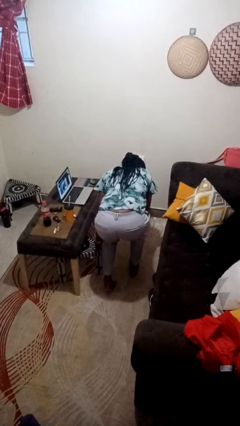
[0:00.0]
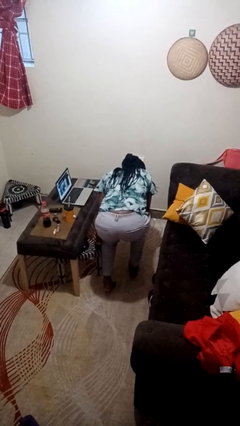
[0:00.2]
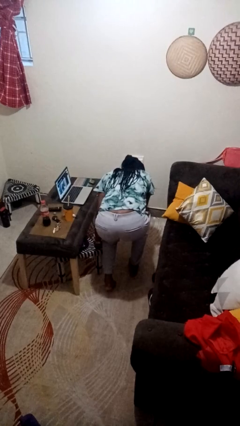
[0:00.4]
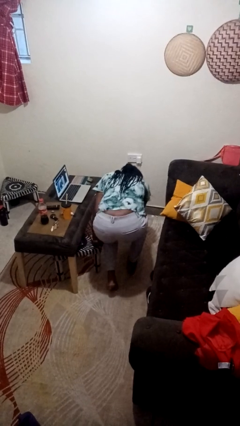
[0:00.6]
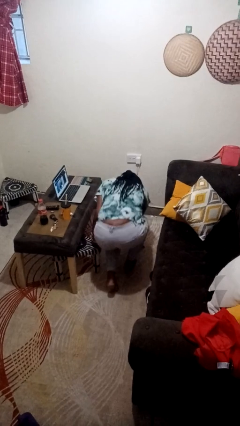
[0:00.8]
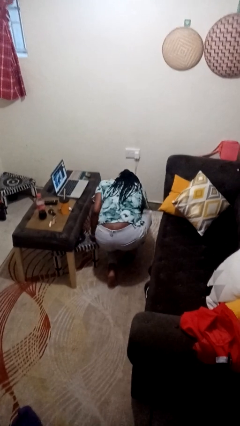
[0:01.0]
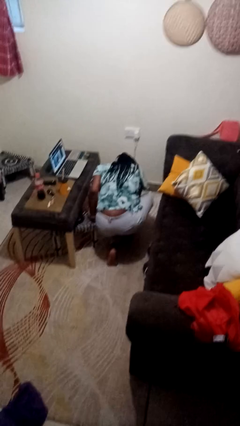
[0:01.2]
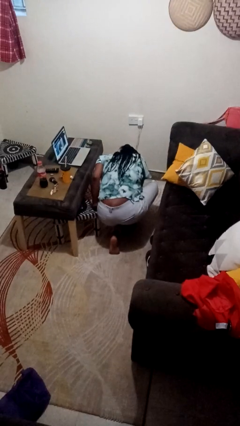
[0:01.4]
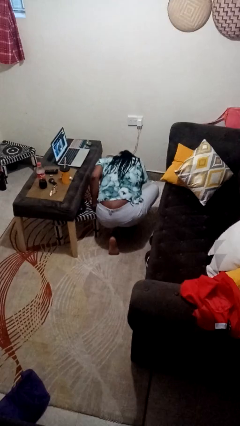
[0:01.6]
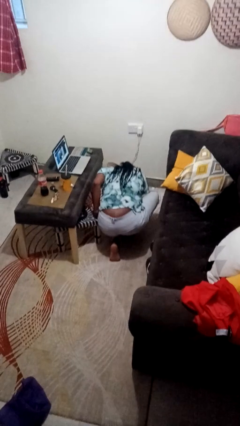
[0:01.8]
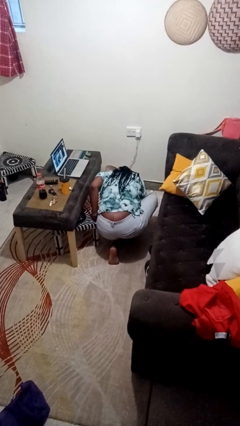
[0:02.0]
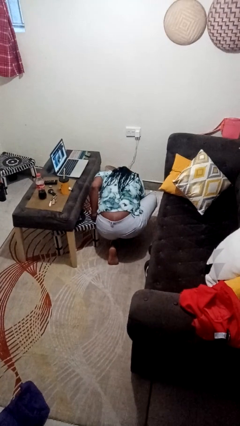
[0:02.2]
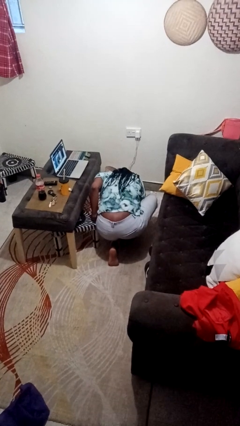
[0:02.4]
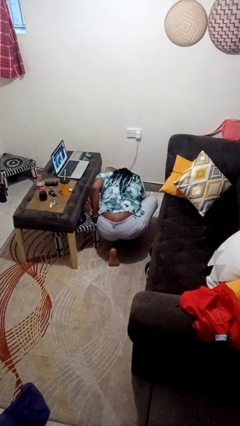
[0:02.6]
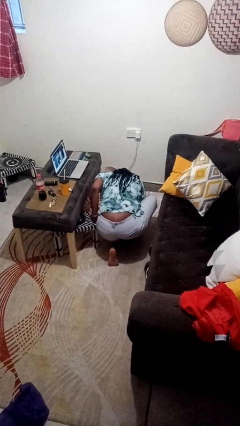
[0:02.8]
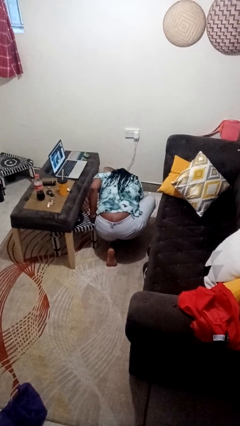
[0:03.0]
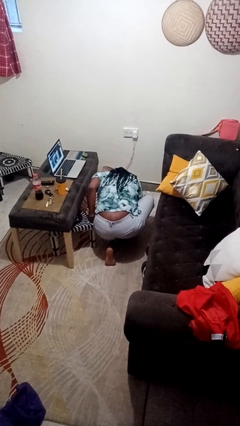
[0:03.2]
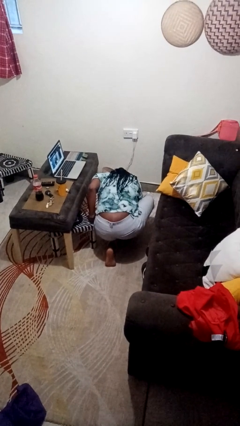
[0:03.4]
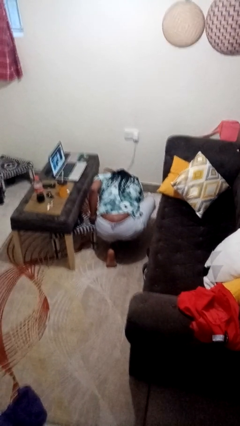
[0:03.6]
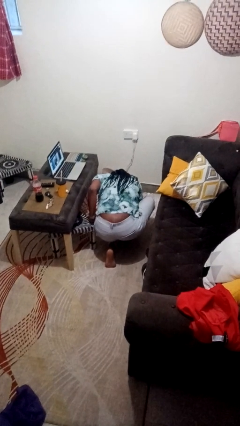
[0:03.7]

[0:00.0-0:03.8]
person lies down on floor

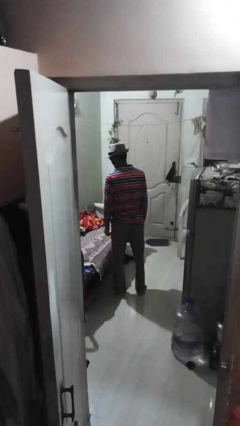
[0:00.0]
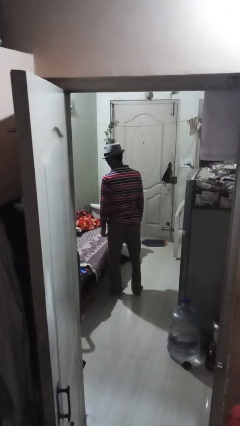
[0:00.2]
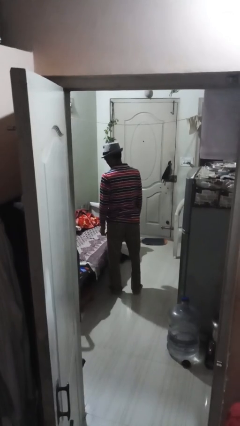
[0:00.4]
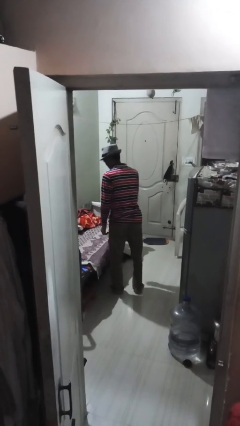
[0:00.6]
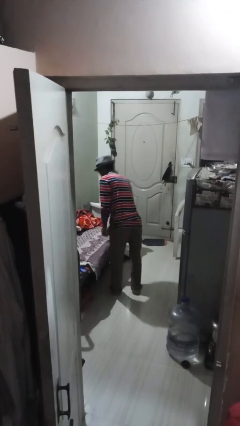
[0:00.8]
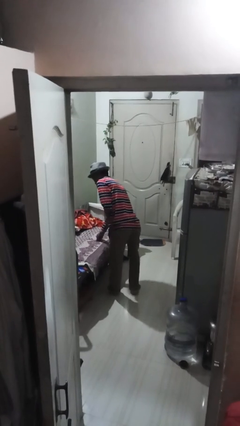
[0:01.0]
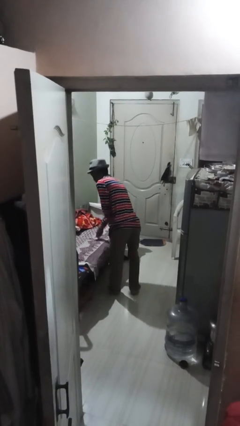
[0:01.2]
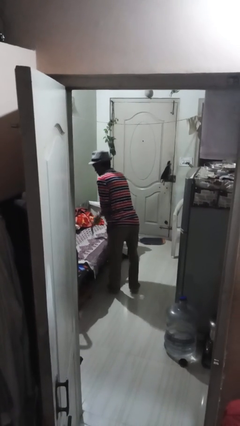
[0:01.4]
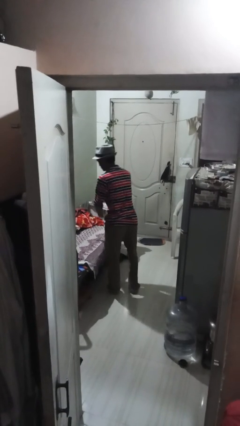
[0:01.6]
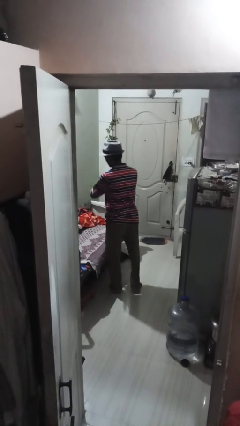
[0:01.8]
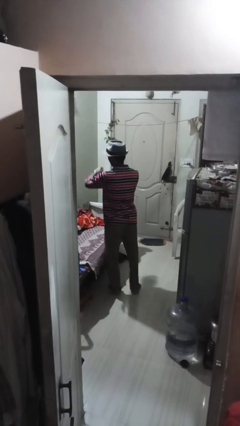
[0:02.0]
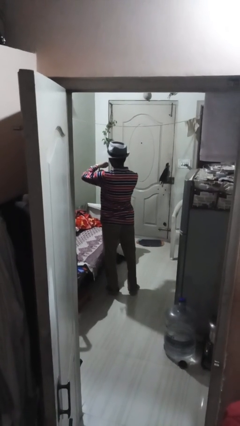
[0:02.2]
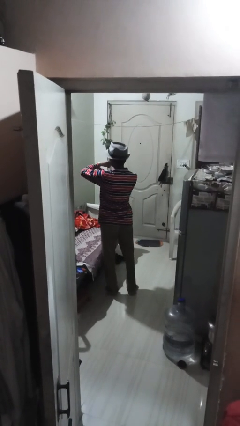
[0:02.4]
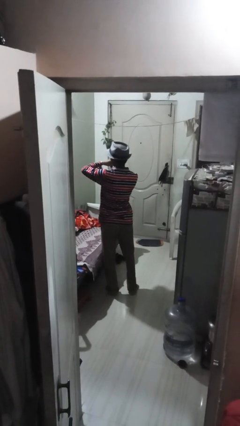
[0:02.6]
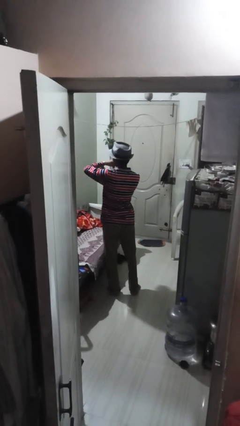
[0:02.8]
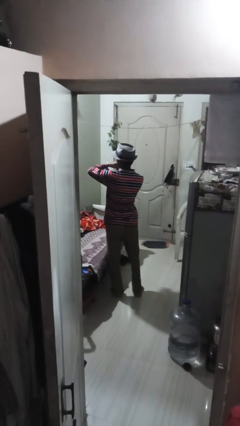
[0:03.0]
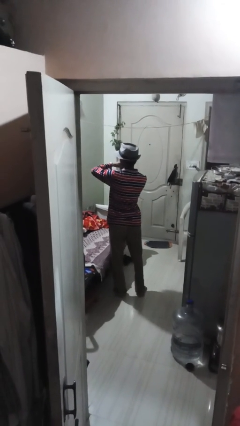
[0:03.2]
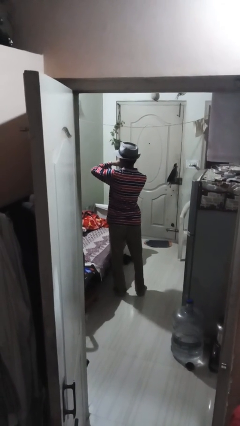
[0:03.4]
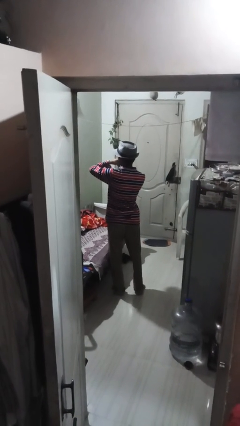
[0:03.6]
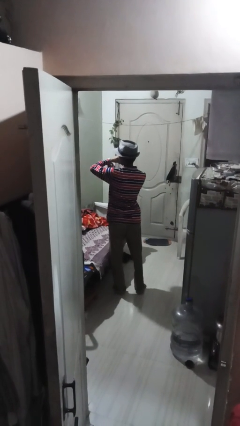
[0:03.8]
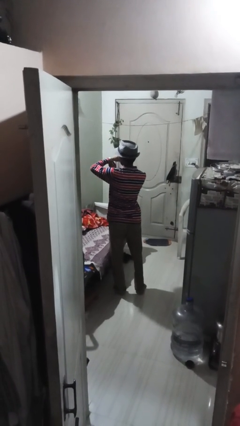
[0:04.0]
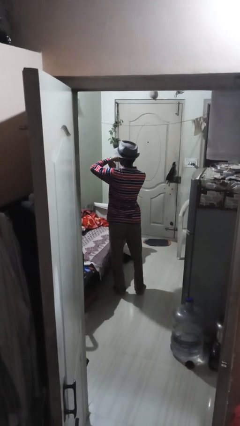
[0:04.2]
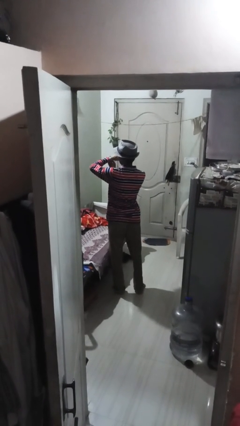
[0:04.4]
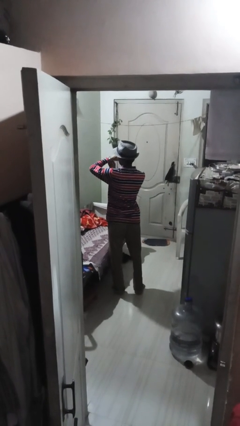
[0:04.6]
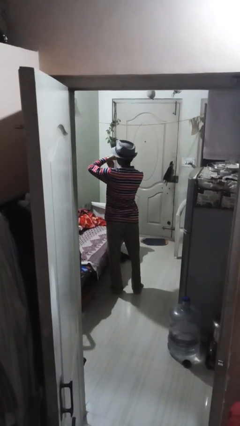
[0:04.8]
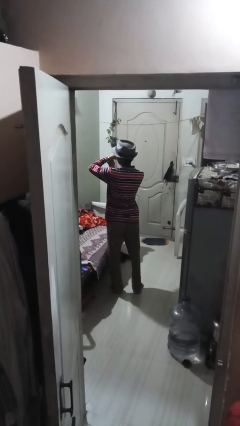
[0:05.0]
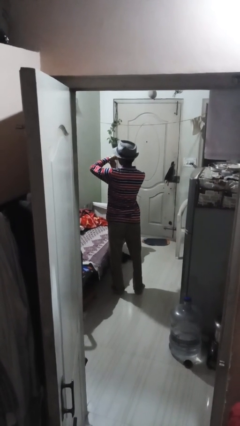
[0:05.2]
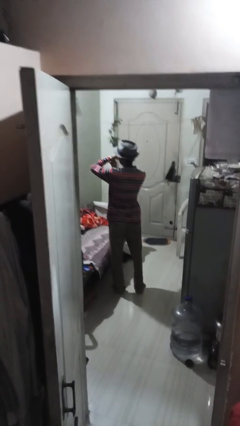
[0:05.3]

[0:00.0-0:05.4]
person puts on wristwatch

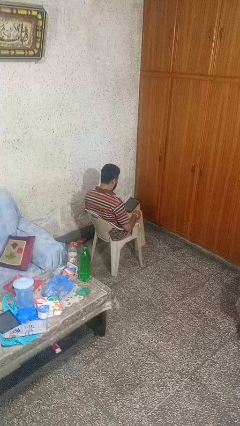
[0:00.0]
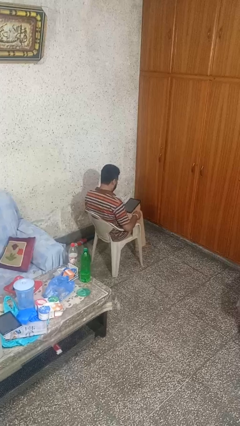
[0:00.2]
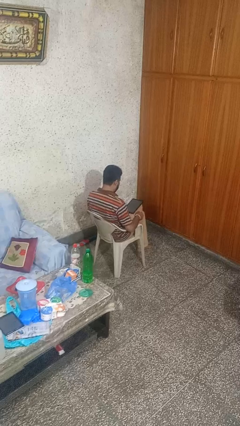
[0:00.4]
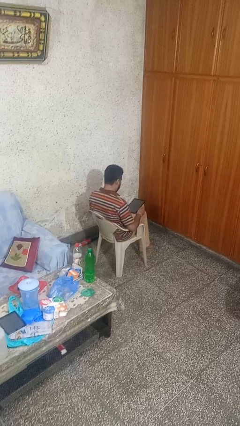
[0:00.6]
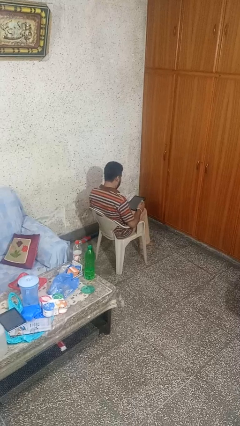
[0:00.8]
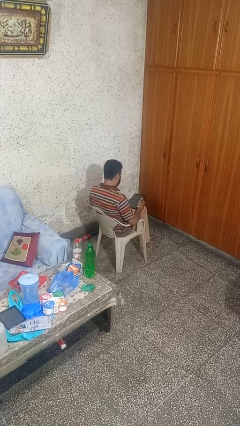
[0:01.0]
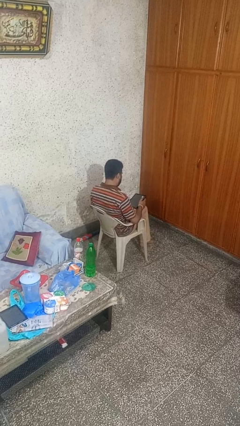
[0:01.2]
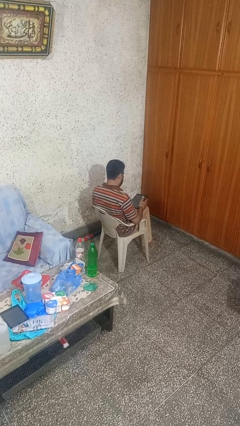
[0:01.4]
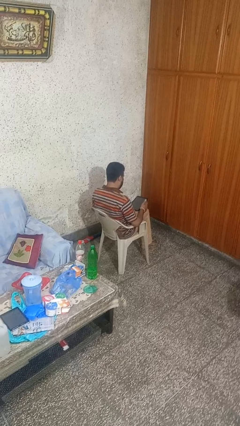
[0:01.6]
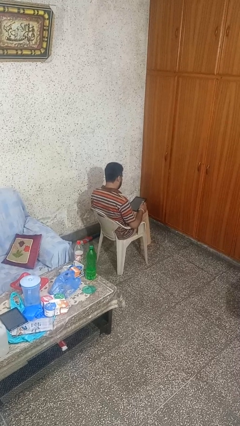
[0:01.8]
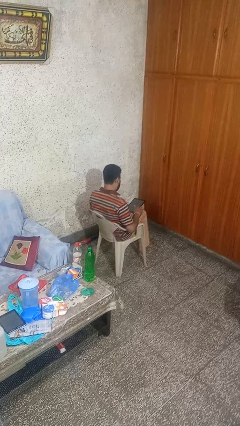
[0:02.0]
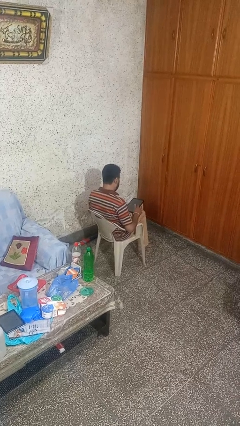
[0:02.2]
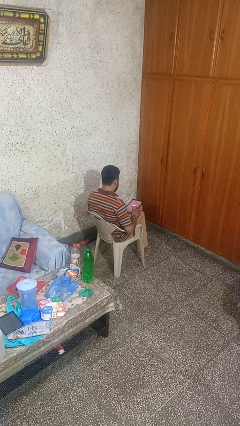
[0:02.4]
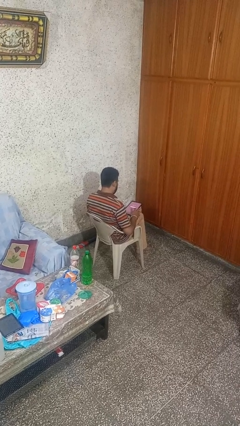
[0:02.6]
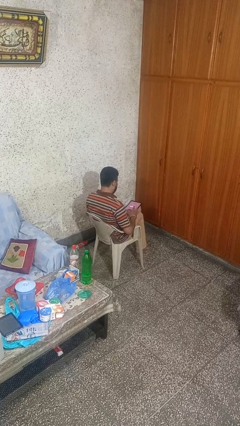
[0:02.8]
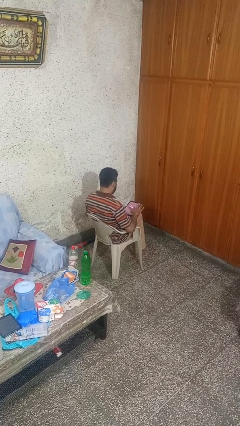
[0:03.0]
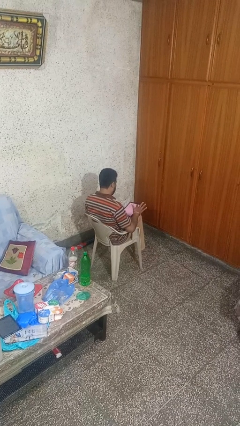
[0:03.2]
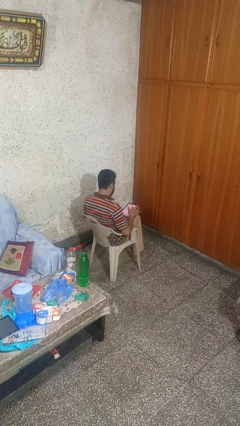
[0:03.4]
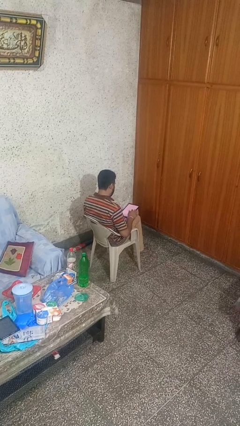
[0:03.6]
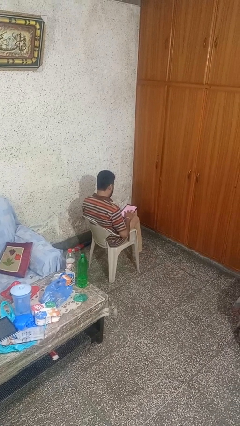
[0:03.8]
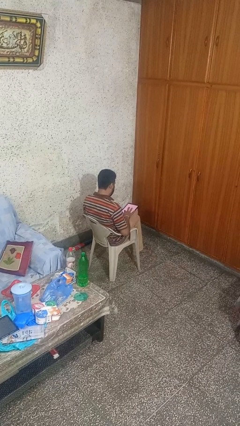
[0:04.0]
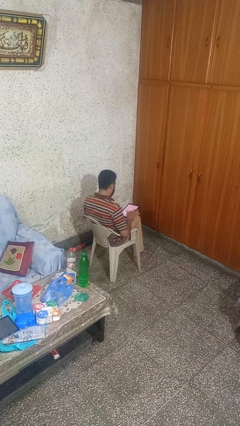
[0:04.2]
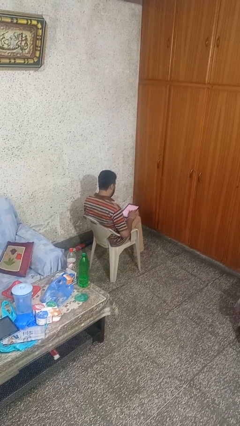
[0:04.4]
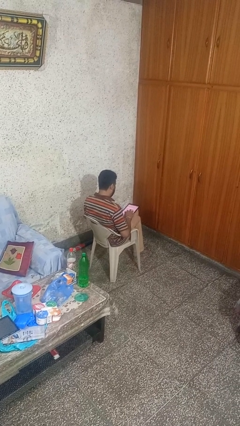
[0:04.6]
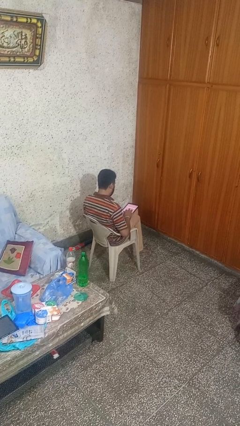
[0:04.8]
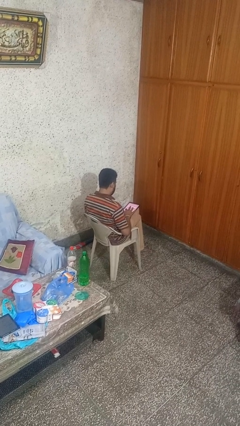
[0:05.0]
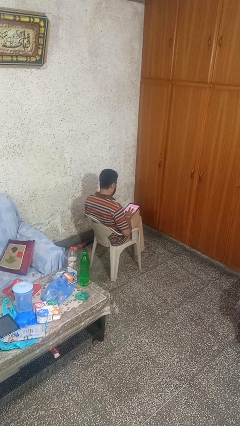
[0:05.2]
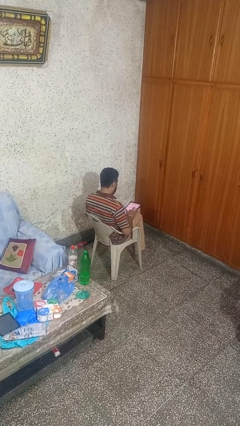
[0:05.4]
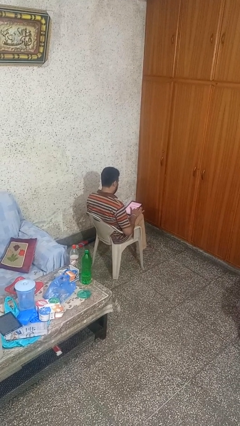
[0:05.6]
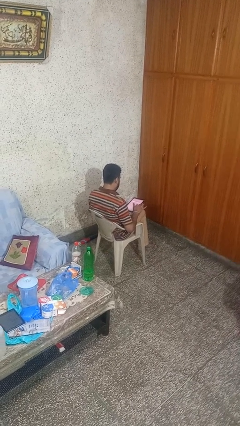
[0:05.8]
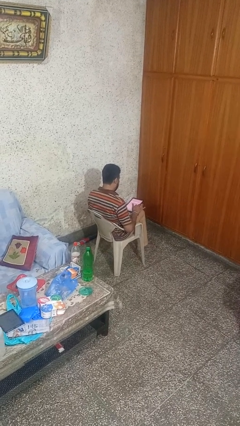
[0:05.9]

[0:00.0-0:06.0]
person interacts with tablet

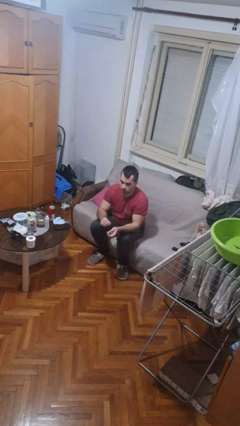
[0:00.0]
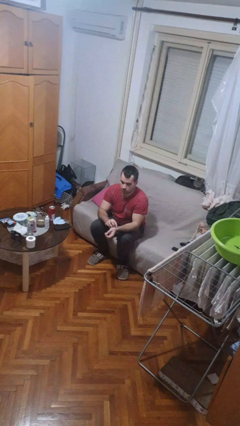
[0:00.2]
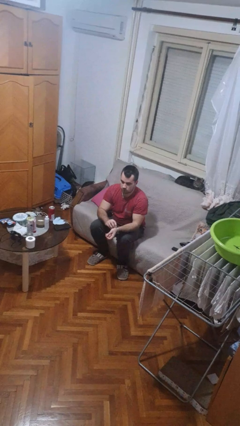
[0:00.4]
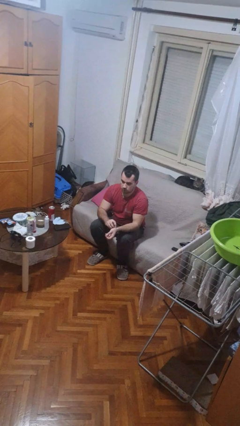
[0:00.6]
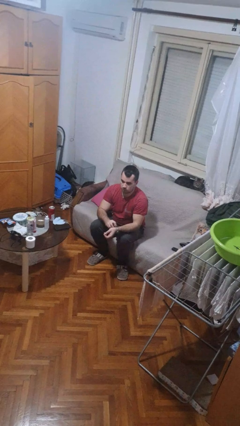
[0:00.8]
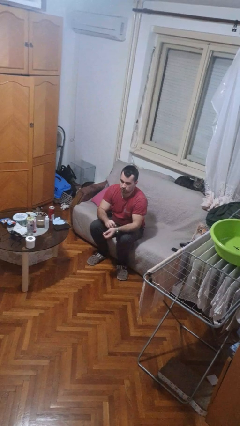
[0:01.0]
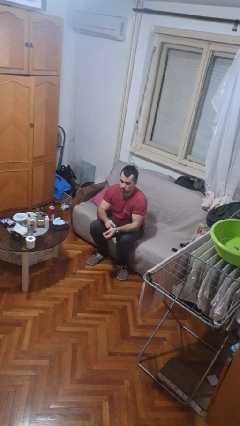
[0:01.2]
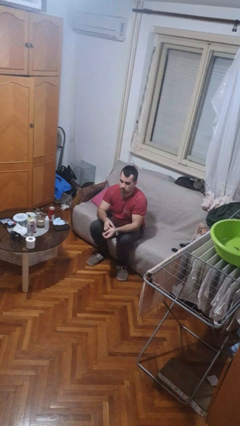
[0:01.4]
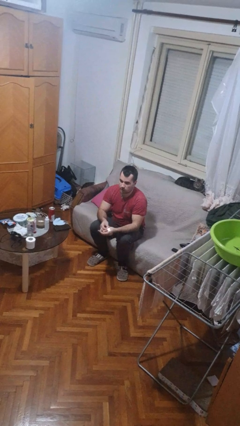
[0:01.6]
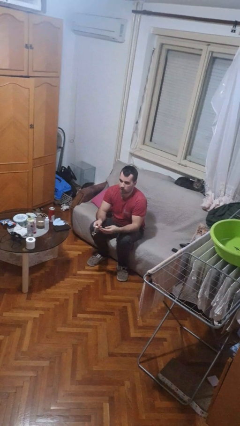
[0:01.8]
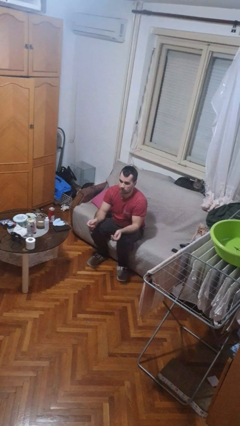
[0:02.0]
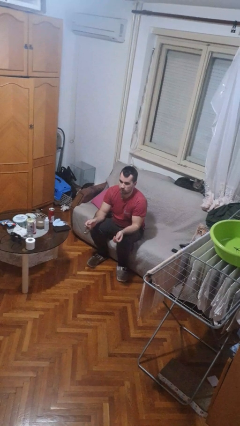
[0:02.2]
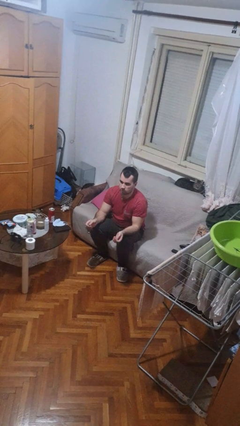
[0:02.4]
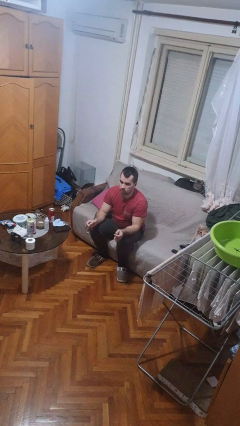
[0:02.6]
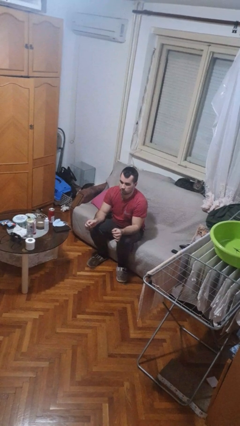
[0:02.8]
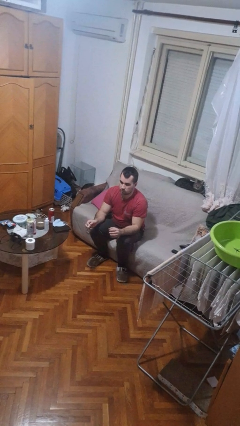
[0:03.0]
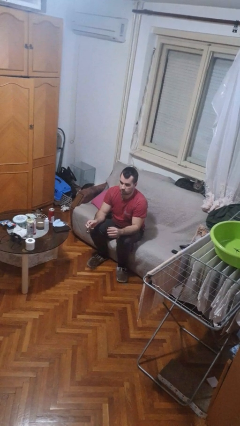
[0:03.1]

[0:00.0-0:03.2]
person takes off wristwatch
